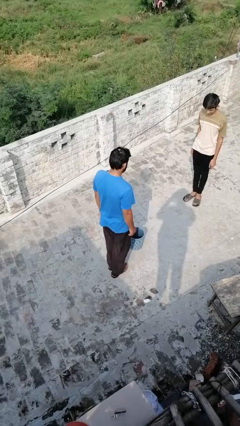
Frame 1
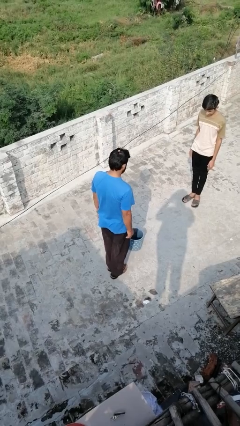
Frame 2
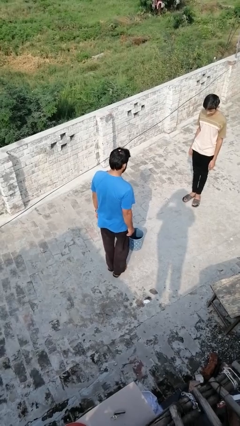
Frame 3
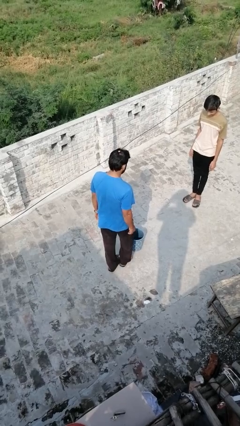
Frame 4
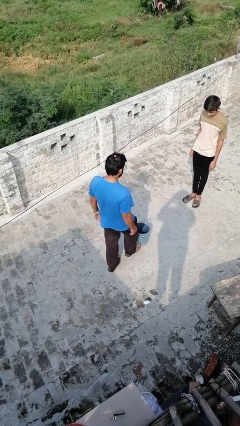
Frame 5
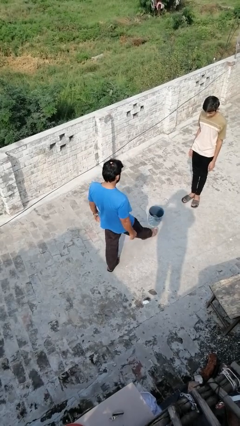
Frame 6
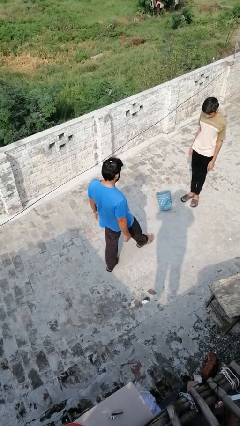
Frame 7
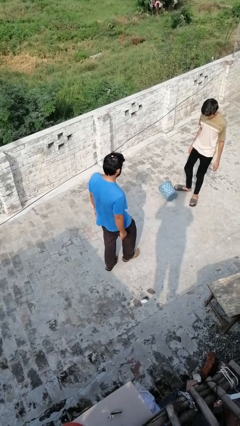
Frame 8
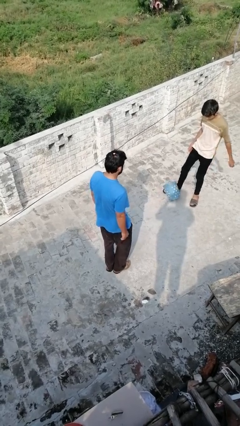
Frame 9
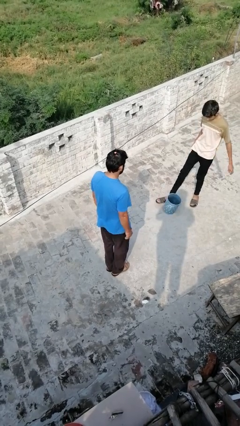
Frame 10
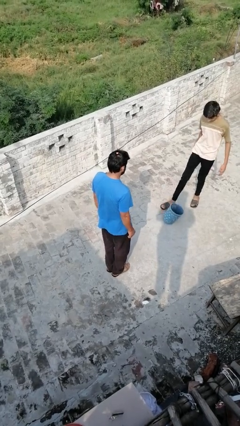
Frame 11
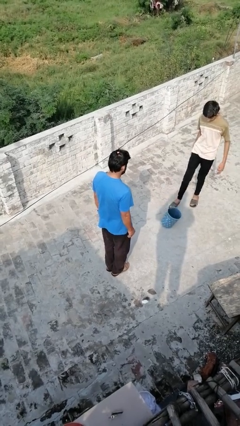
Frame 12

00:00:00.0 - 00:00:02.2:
person kicks object to person

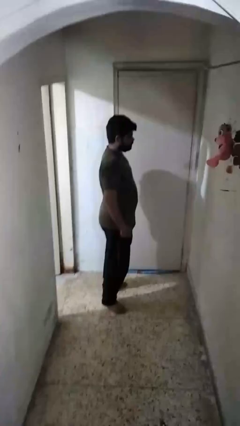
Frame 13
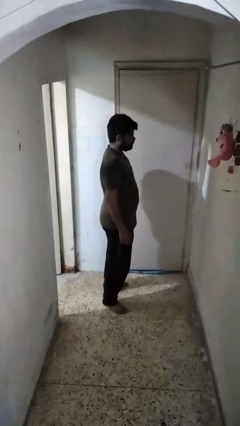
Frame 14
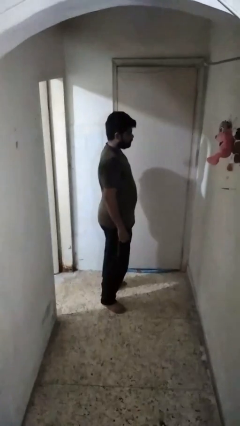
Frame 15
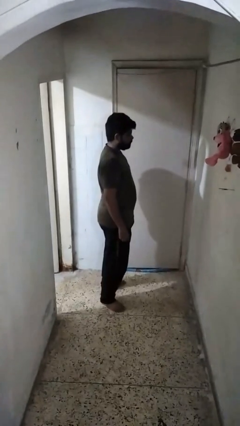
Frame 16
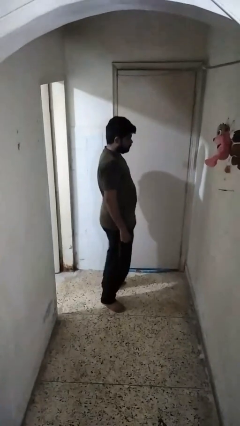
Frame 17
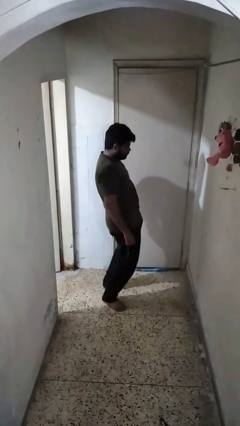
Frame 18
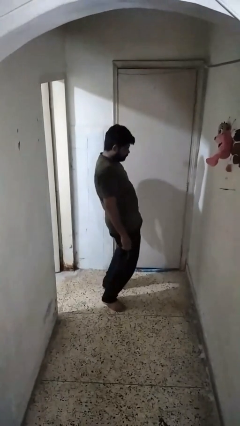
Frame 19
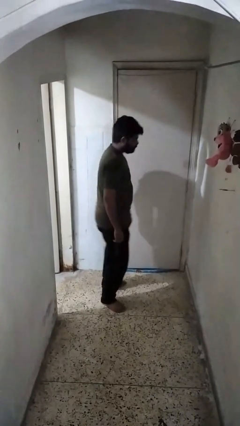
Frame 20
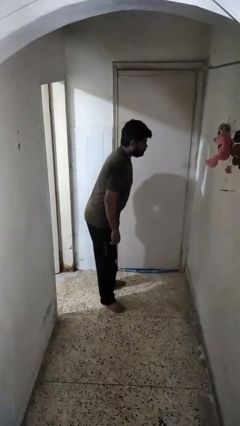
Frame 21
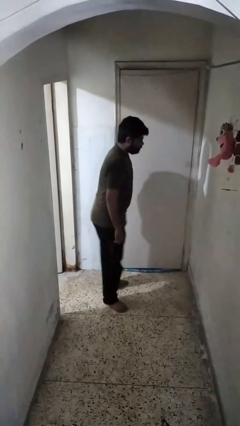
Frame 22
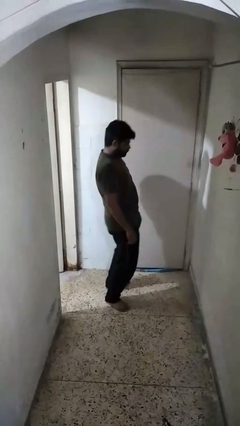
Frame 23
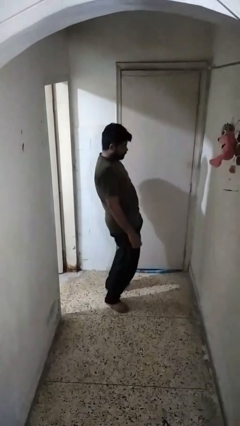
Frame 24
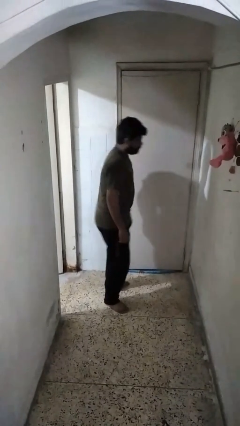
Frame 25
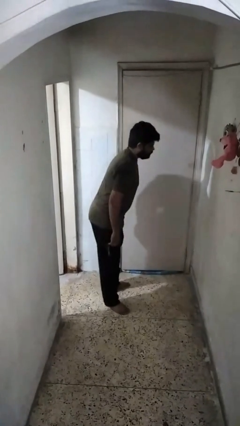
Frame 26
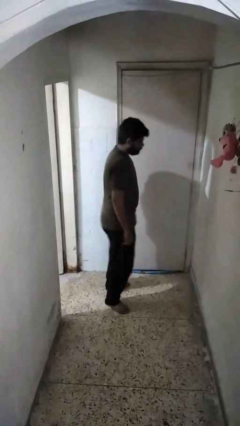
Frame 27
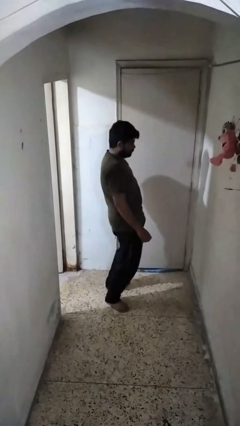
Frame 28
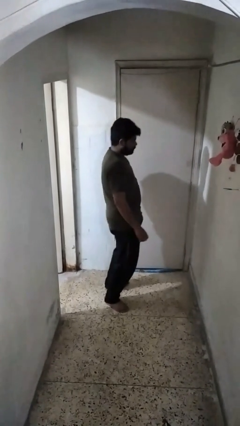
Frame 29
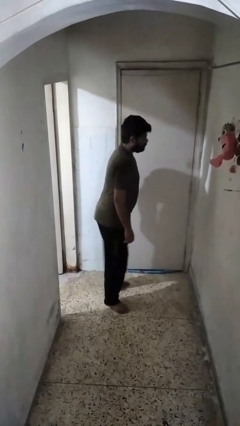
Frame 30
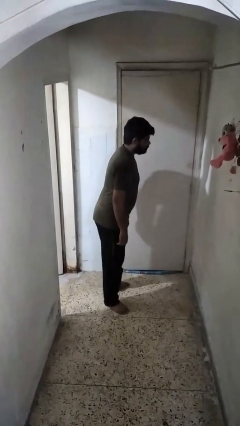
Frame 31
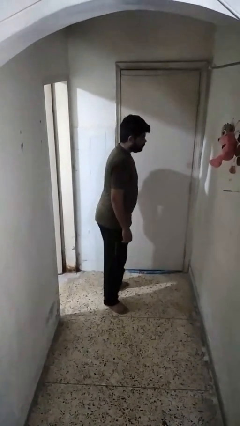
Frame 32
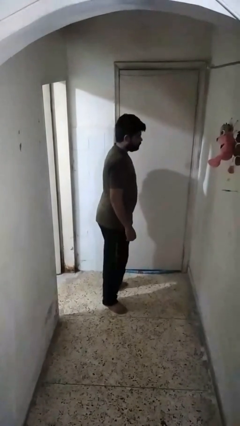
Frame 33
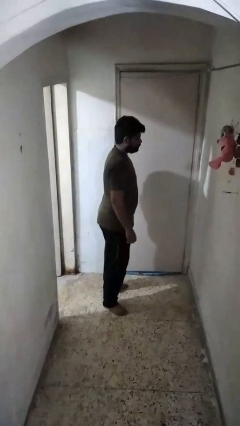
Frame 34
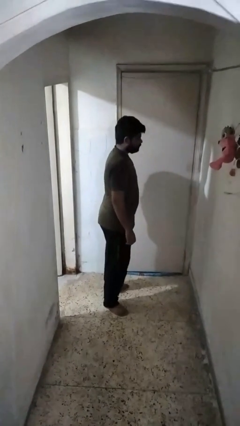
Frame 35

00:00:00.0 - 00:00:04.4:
person wiggles hips

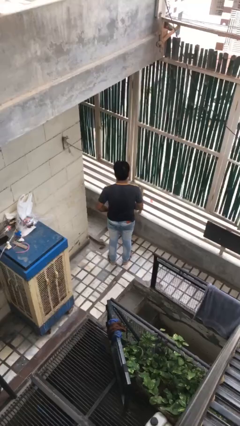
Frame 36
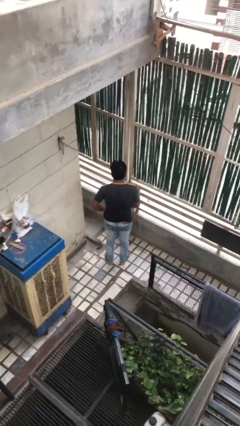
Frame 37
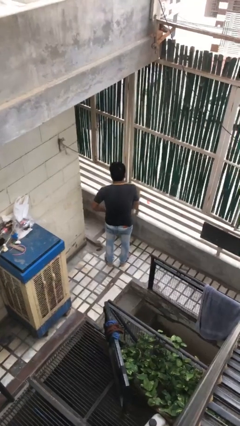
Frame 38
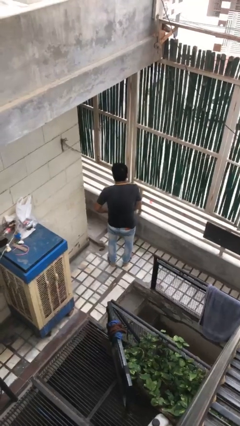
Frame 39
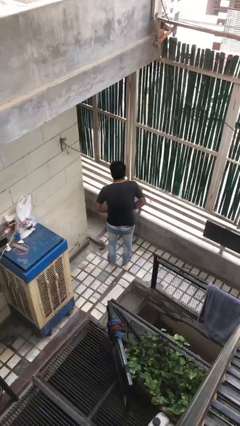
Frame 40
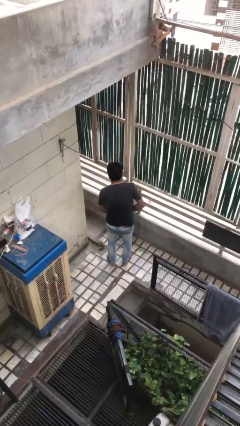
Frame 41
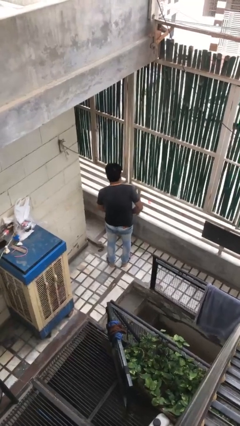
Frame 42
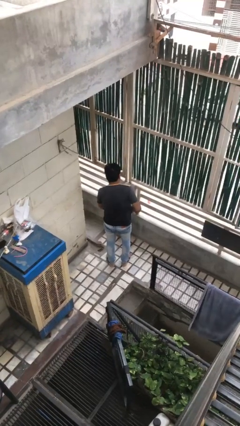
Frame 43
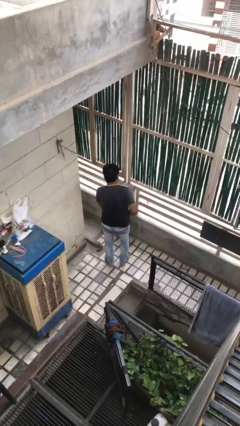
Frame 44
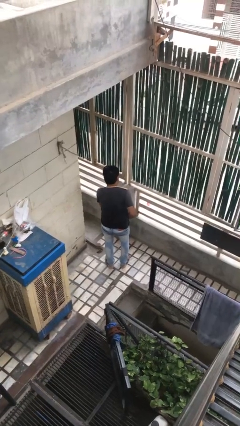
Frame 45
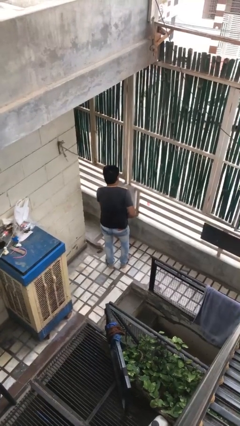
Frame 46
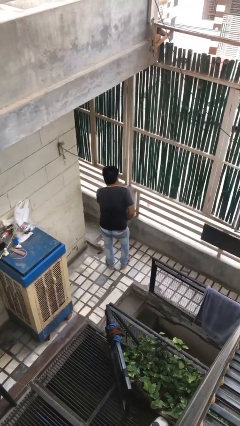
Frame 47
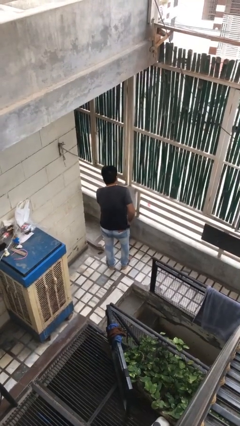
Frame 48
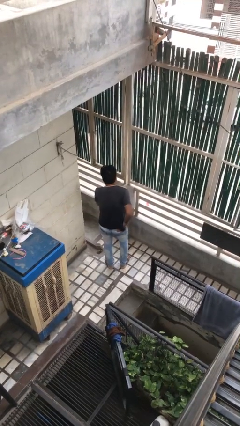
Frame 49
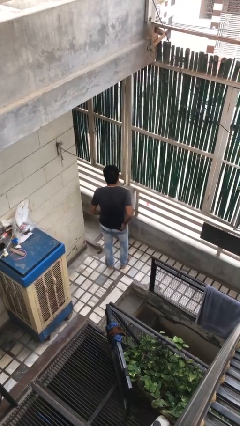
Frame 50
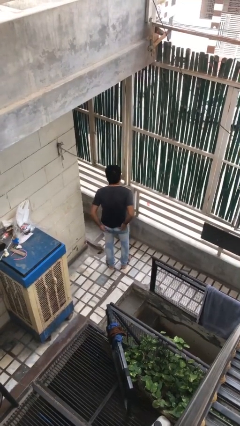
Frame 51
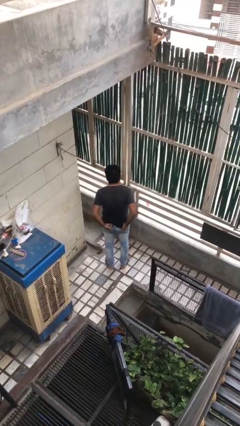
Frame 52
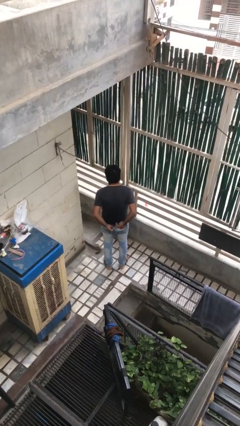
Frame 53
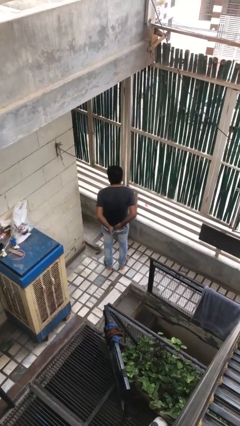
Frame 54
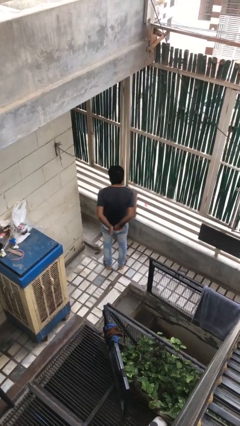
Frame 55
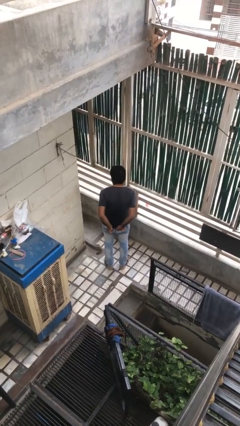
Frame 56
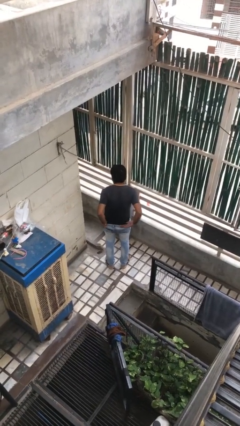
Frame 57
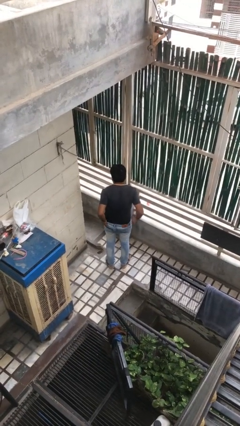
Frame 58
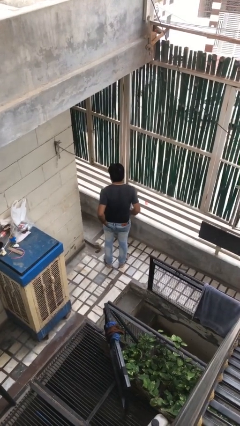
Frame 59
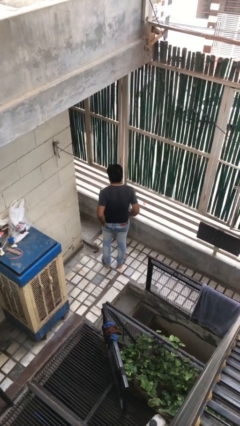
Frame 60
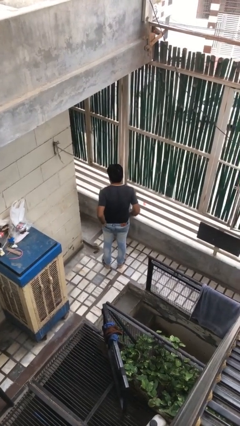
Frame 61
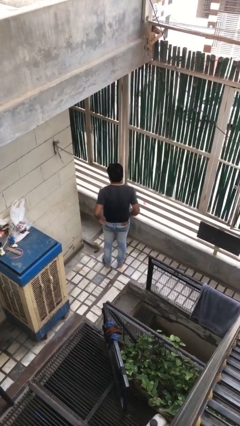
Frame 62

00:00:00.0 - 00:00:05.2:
person tucks in shirt

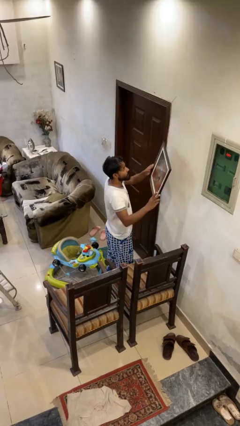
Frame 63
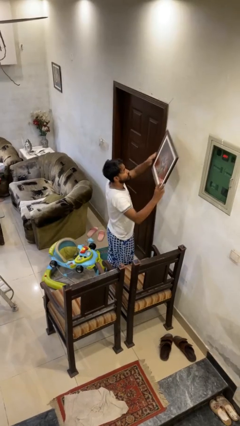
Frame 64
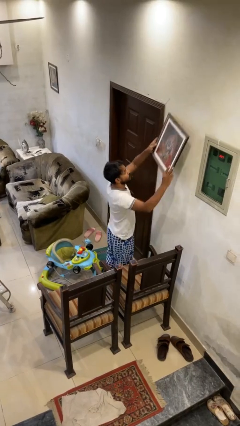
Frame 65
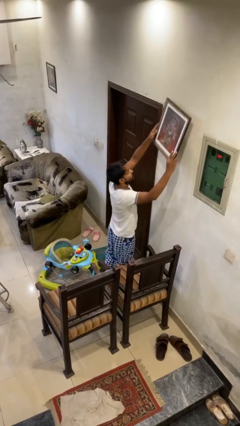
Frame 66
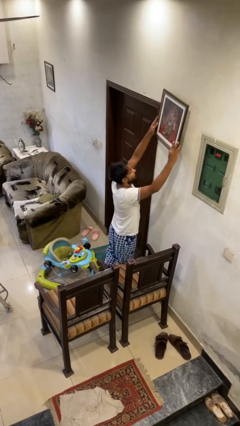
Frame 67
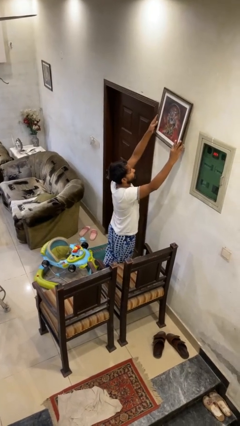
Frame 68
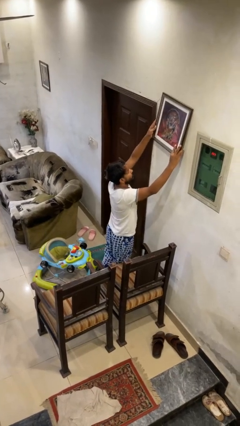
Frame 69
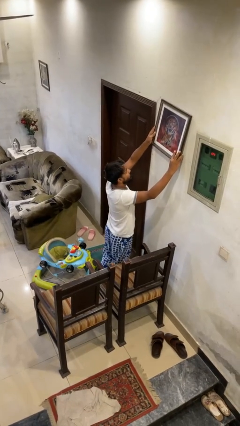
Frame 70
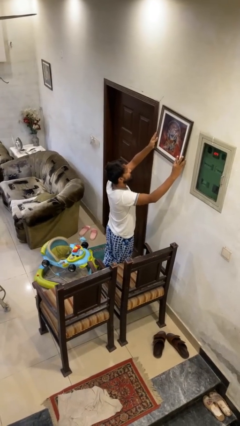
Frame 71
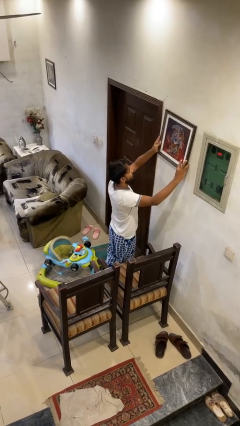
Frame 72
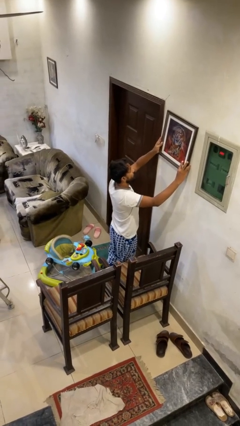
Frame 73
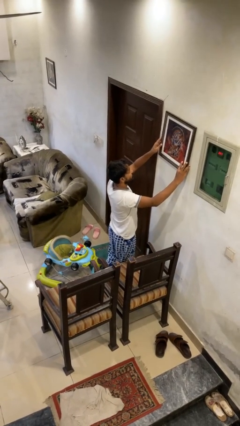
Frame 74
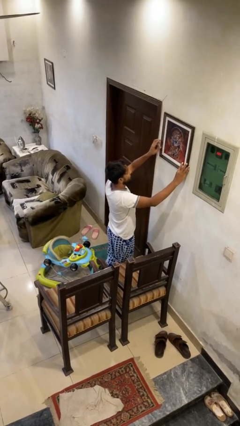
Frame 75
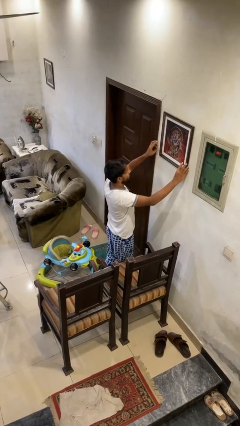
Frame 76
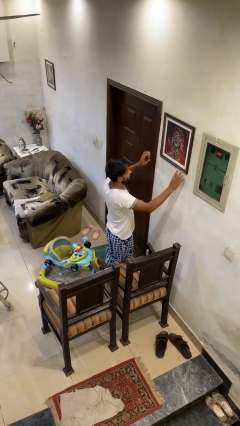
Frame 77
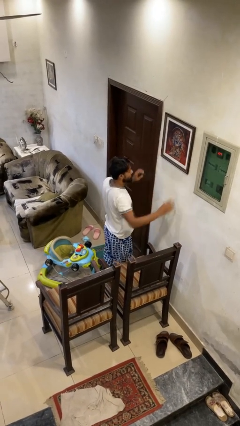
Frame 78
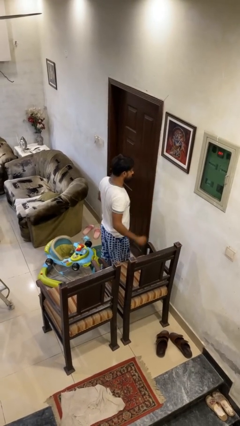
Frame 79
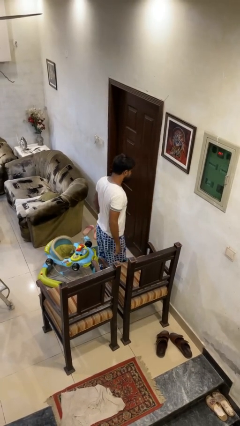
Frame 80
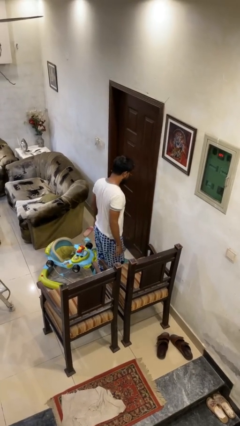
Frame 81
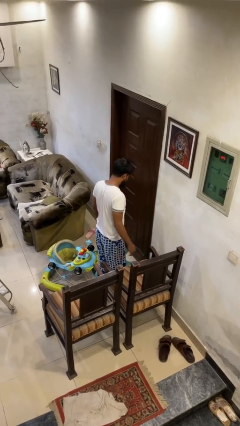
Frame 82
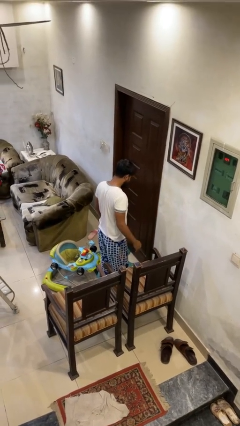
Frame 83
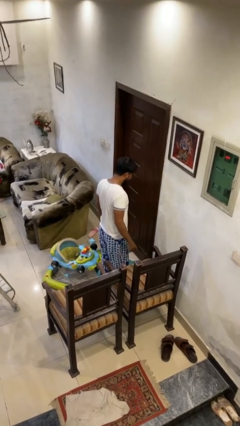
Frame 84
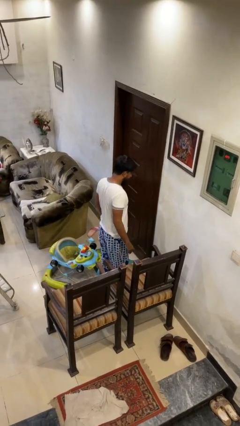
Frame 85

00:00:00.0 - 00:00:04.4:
person puts up picture frame

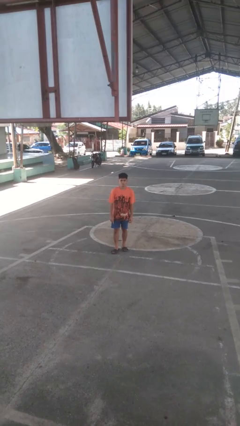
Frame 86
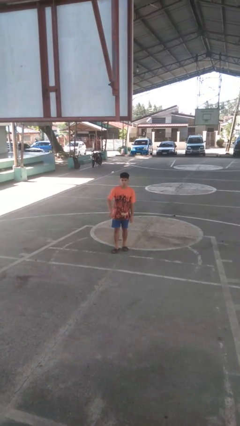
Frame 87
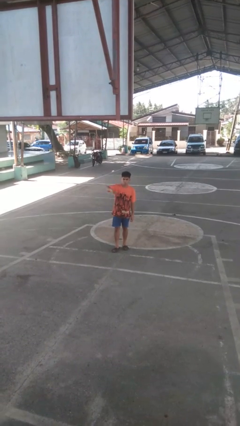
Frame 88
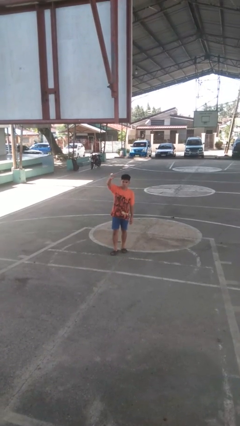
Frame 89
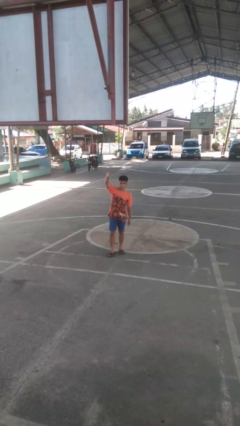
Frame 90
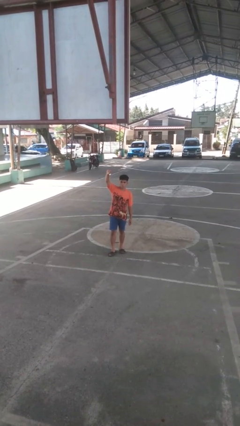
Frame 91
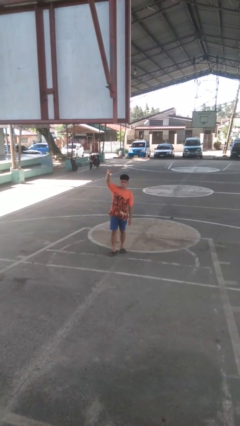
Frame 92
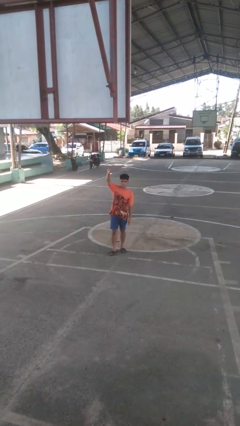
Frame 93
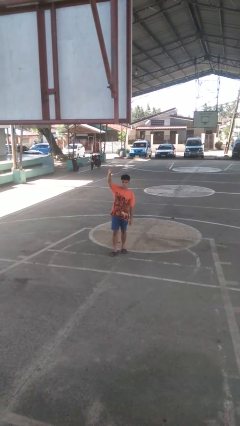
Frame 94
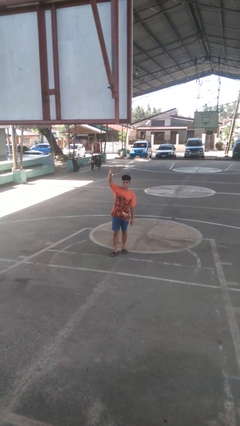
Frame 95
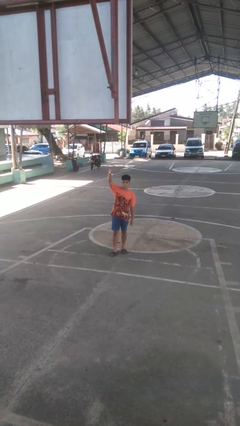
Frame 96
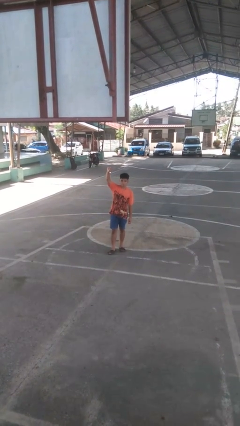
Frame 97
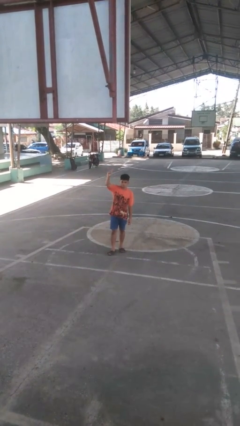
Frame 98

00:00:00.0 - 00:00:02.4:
person gestures swipe up
